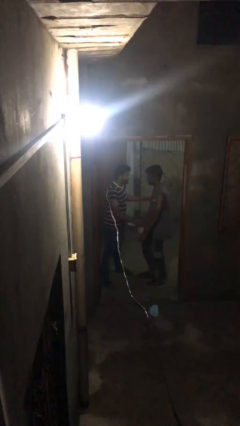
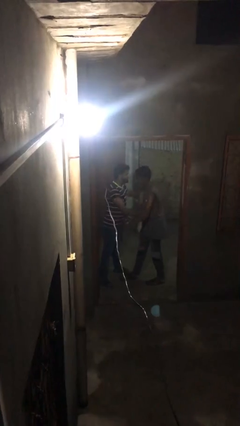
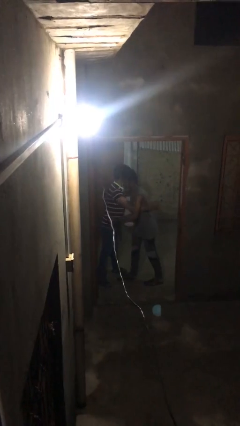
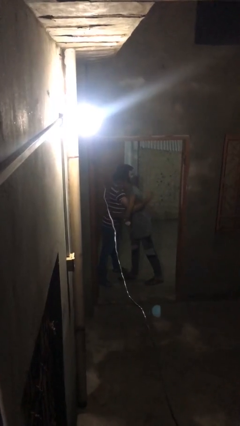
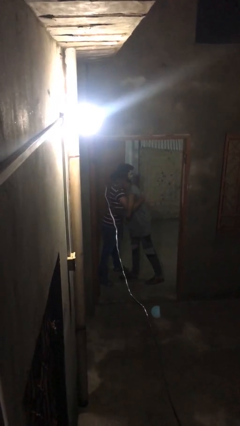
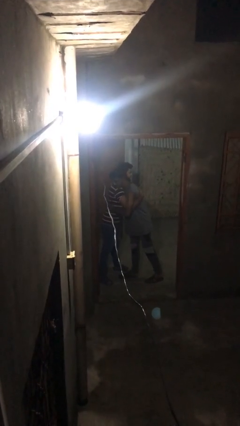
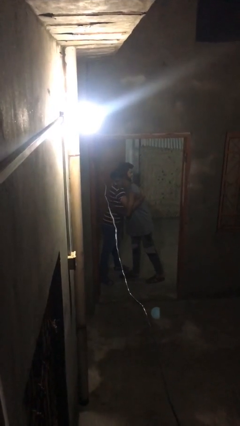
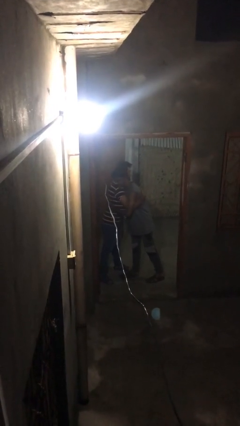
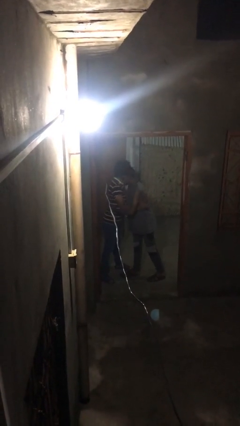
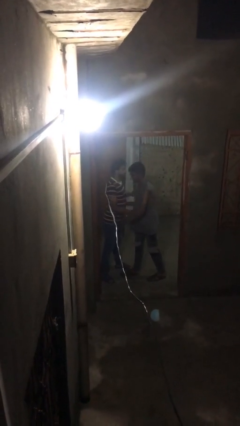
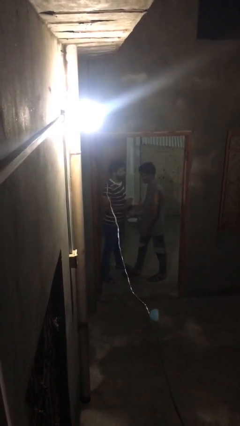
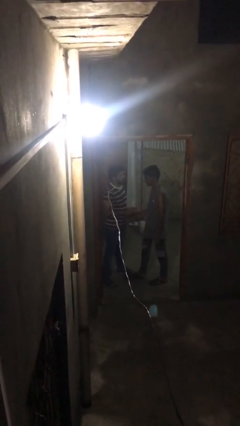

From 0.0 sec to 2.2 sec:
person embraces person

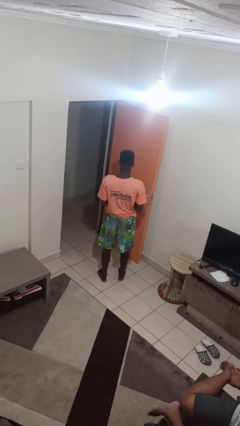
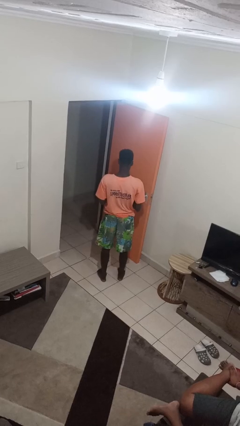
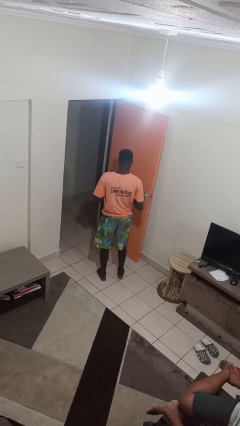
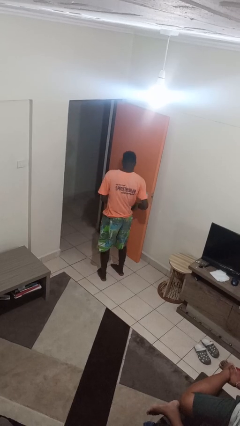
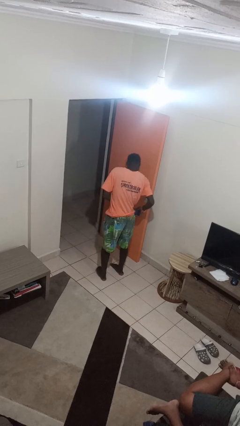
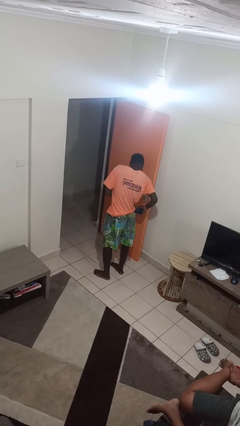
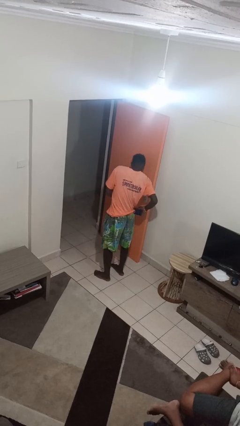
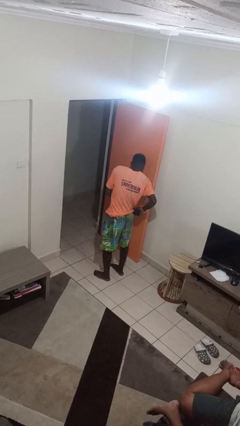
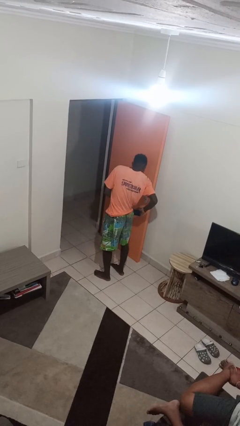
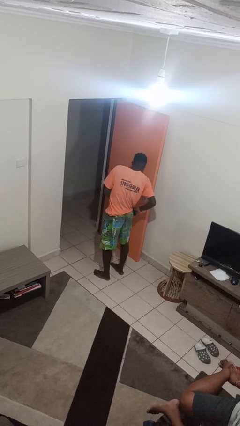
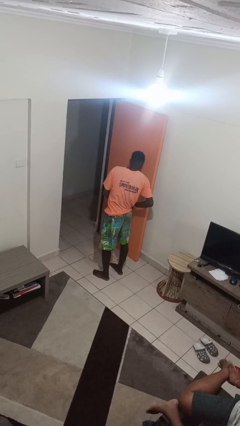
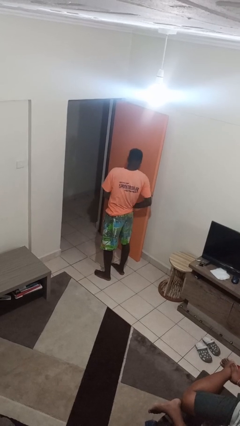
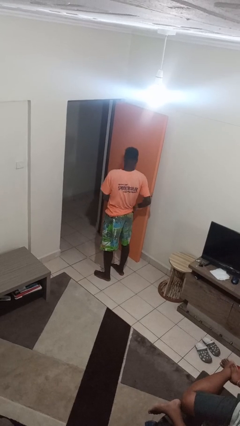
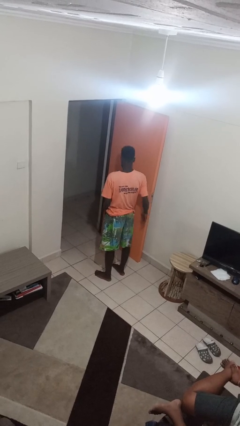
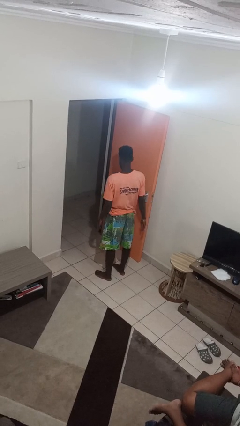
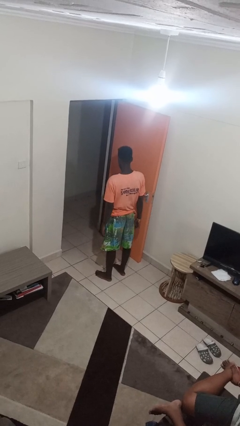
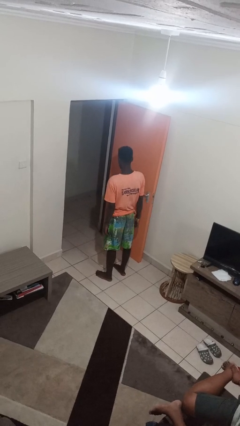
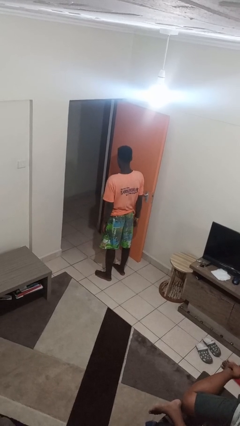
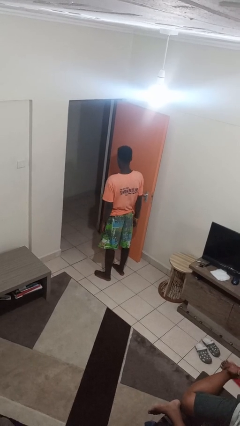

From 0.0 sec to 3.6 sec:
person puts phone into pocket

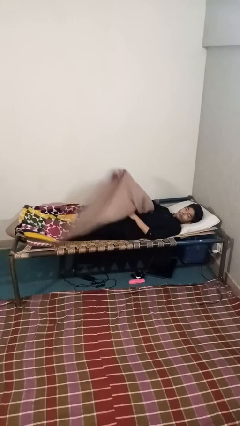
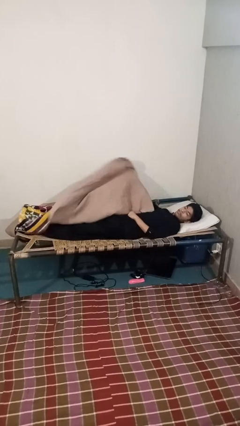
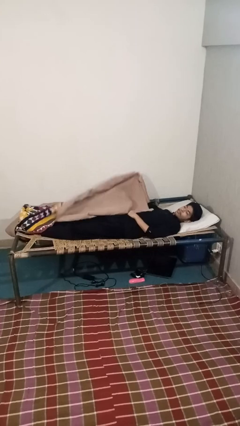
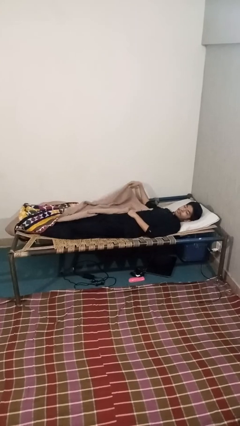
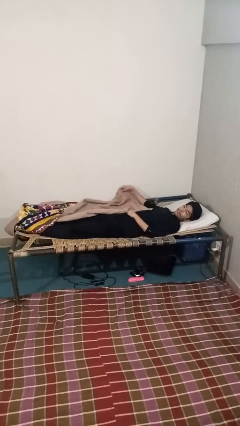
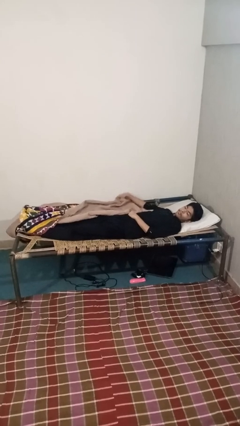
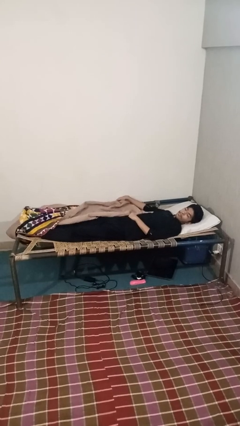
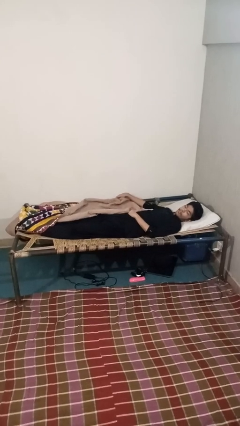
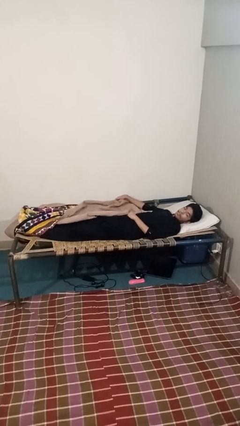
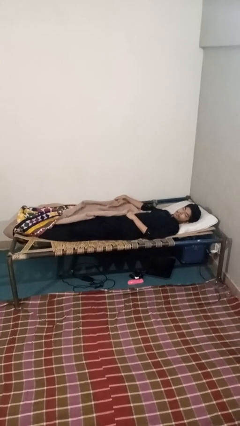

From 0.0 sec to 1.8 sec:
person uncovers with bedsheets

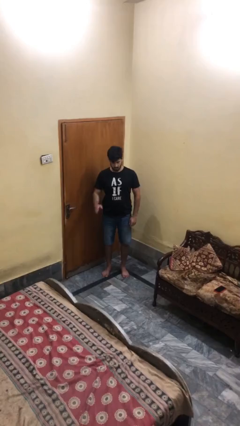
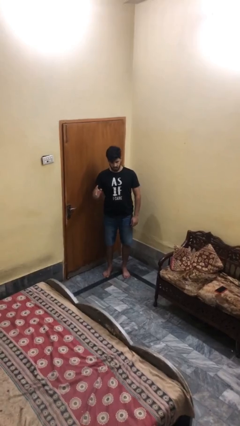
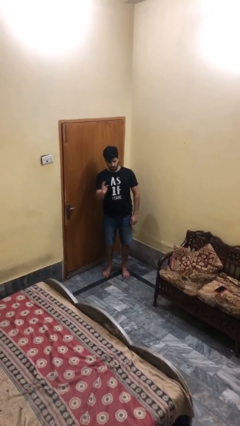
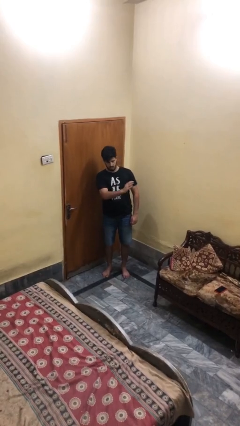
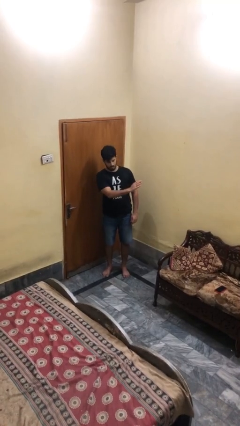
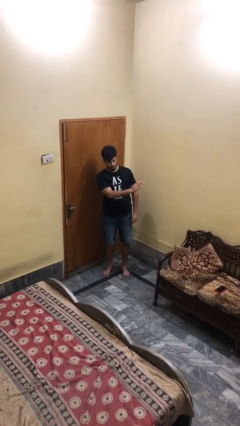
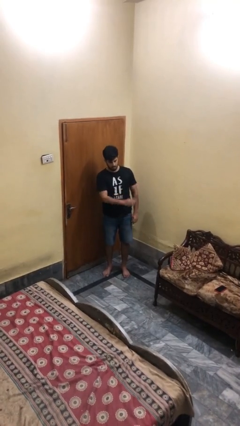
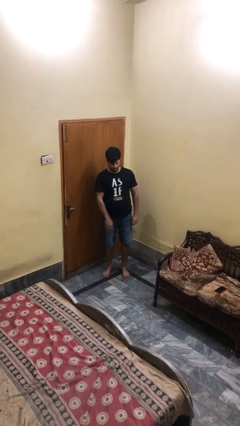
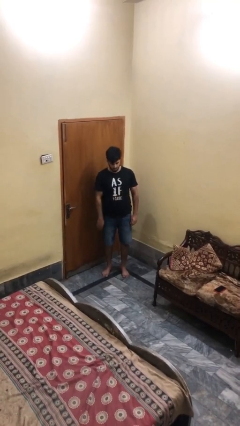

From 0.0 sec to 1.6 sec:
person gestures swipe left

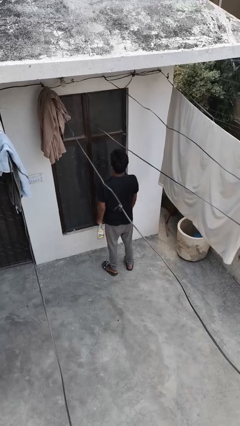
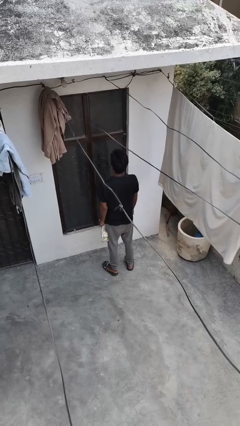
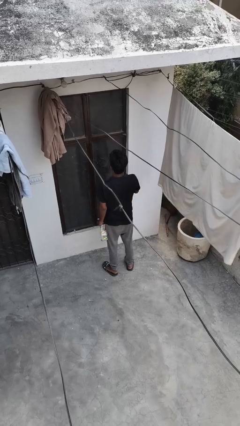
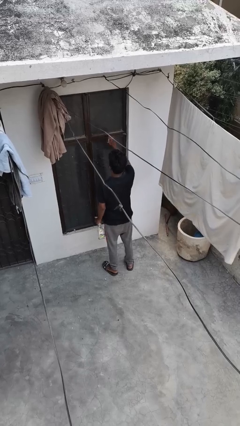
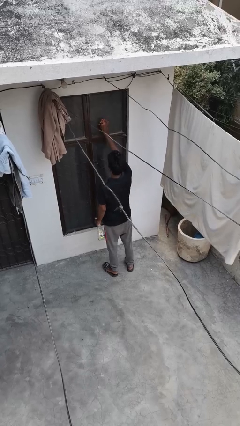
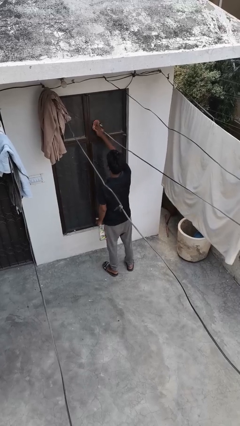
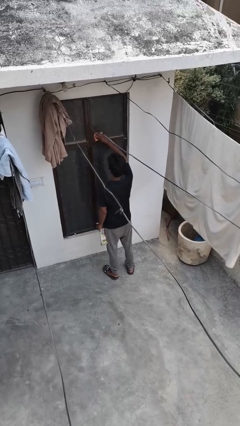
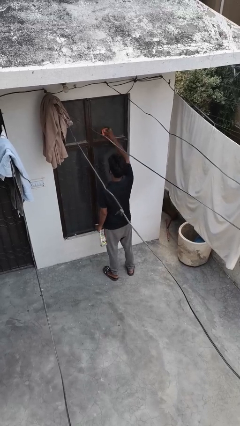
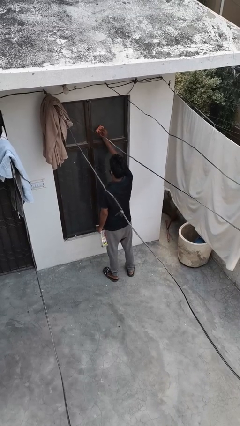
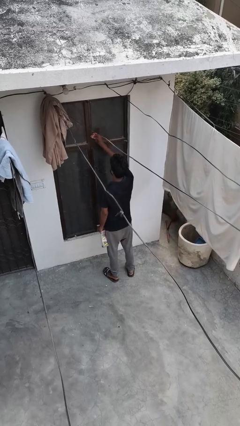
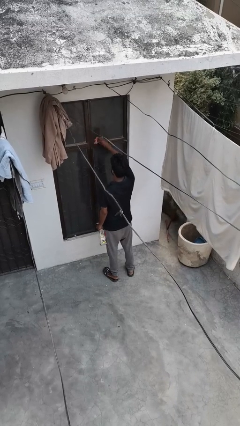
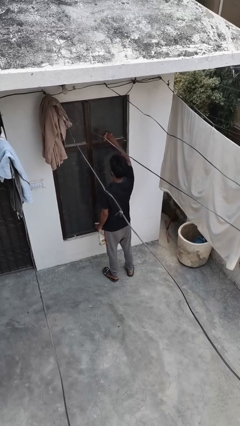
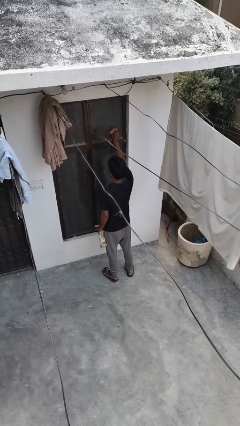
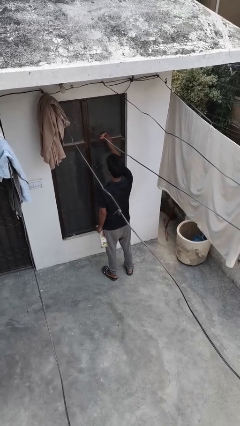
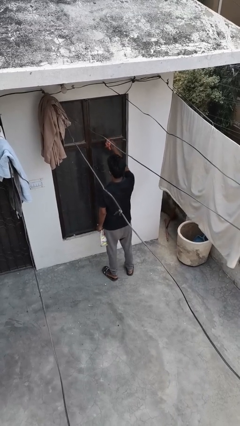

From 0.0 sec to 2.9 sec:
person washes window

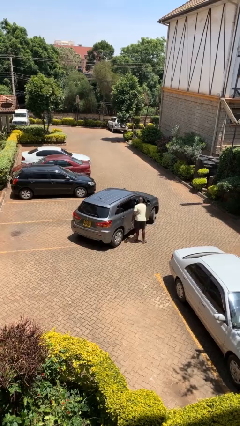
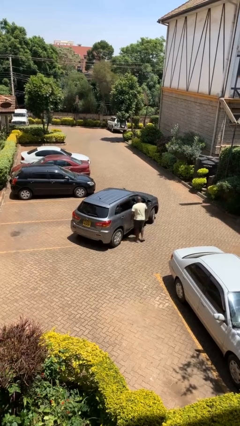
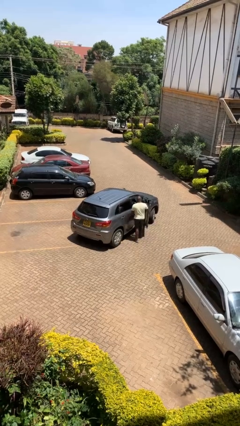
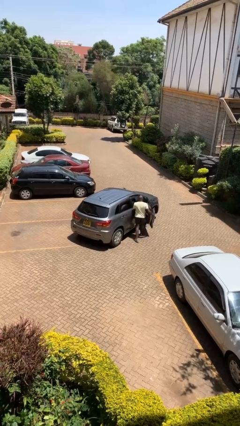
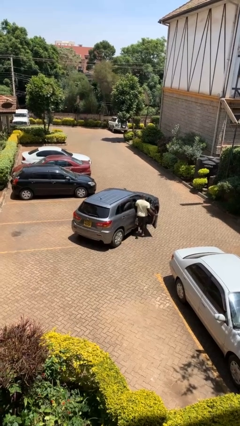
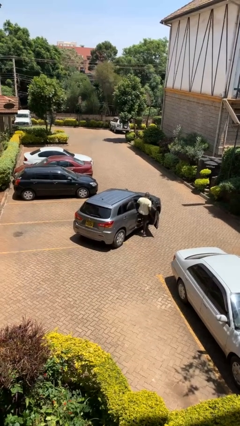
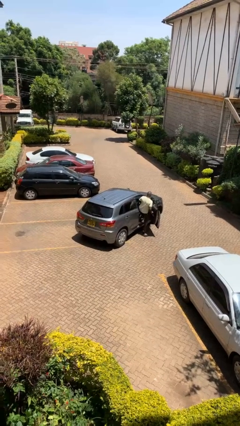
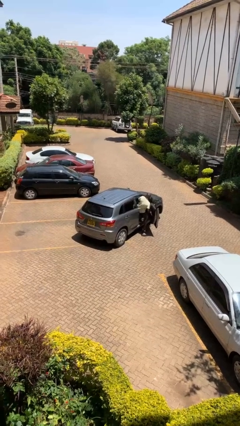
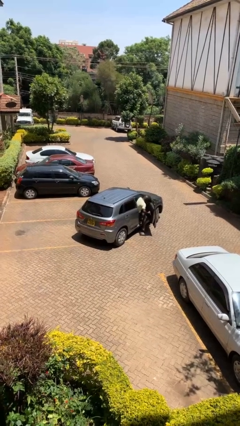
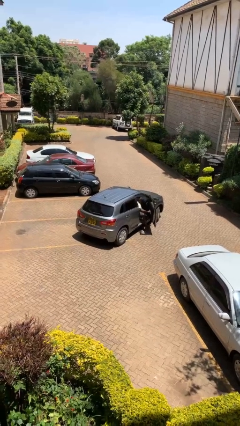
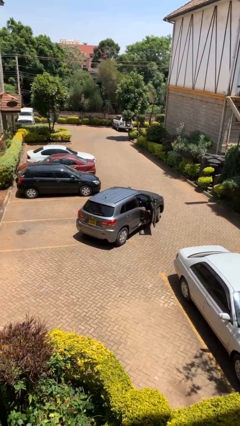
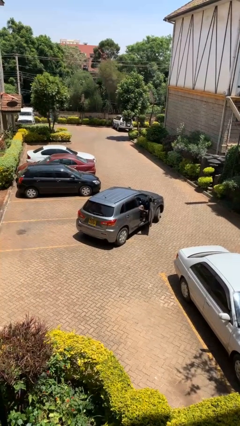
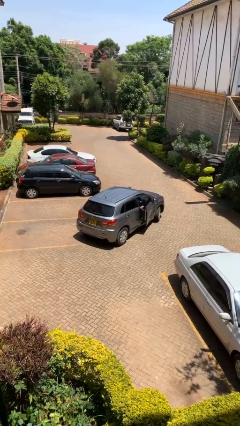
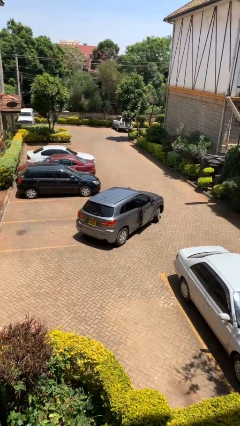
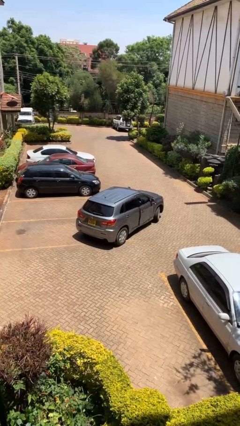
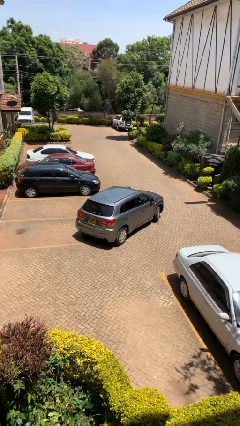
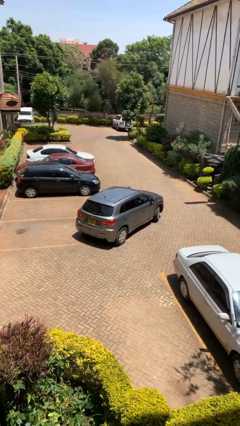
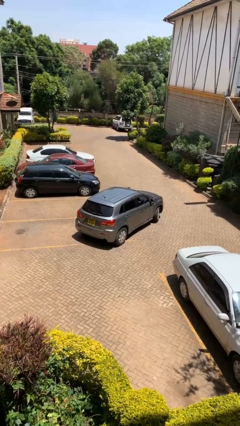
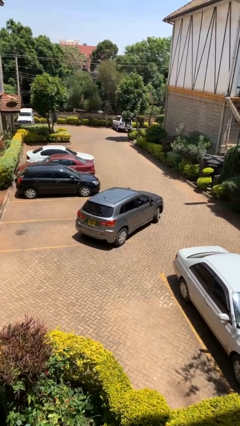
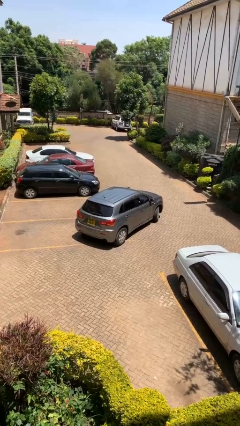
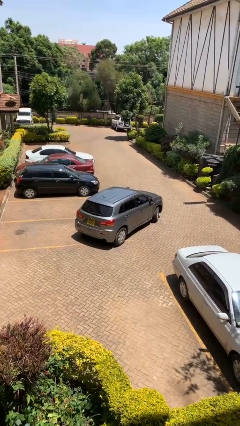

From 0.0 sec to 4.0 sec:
car picks up person

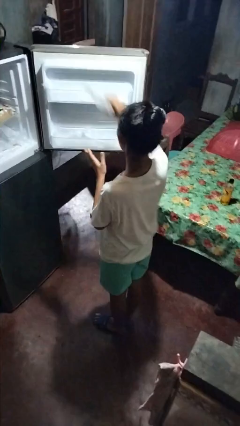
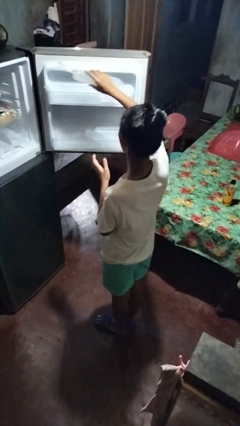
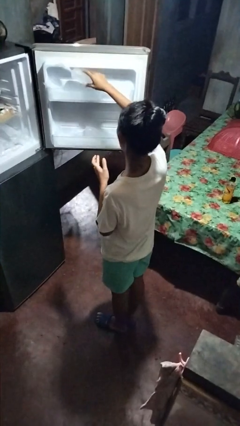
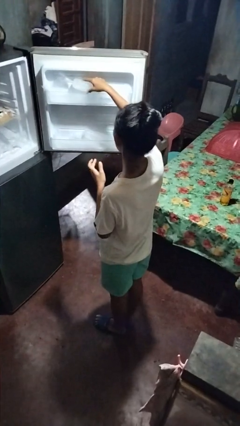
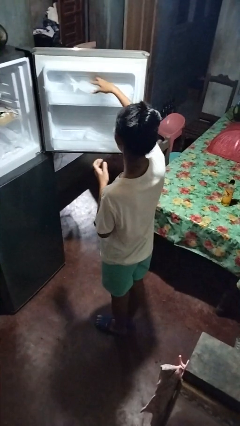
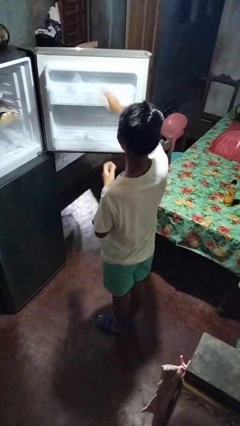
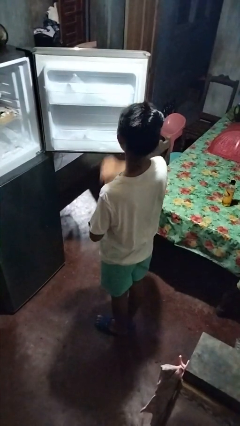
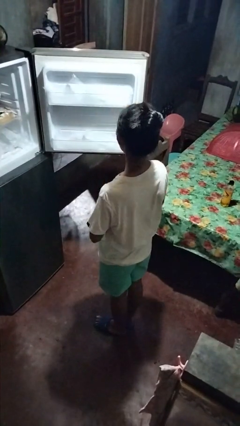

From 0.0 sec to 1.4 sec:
person puts object into refrigerator
